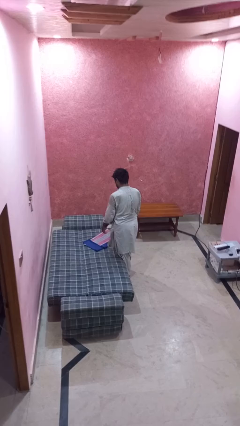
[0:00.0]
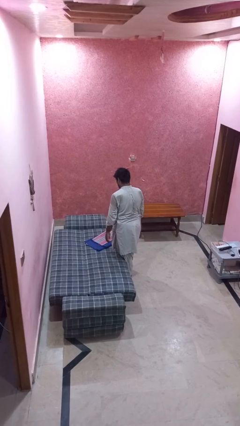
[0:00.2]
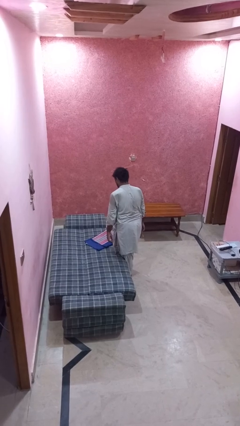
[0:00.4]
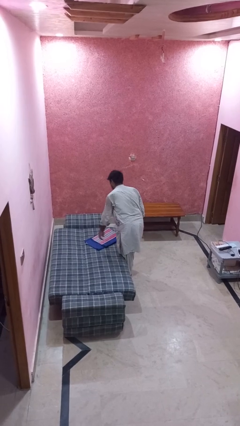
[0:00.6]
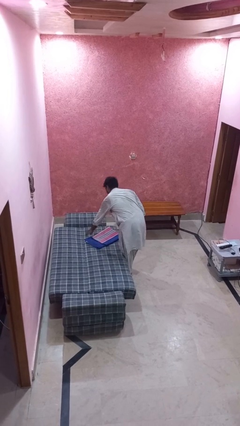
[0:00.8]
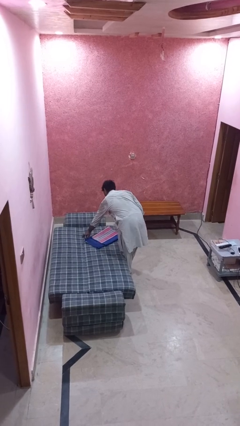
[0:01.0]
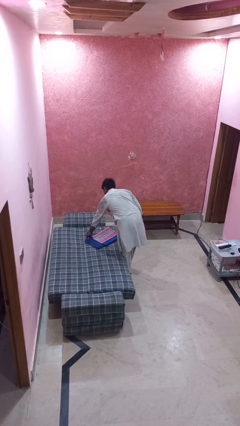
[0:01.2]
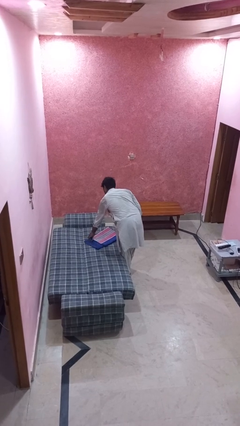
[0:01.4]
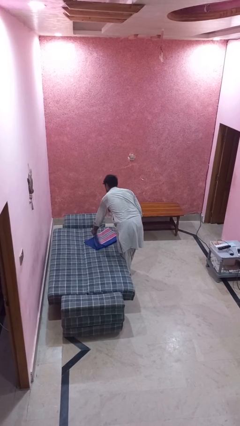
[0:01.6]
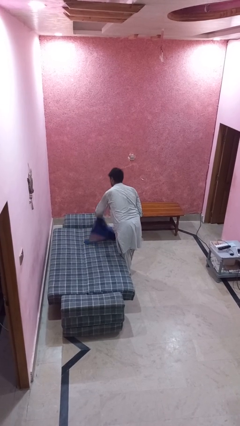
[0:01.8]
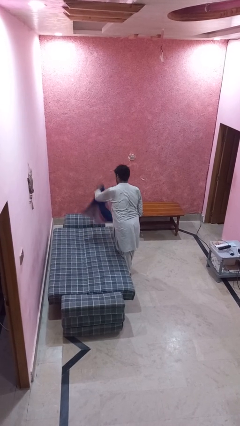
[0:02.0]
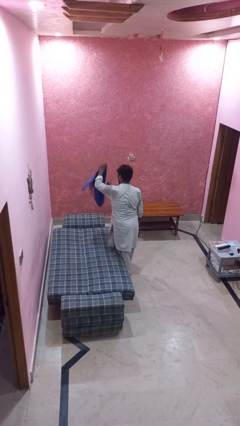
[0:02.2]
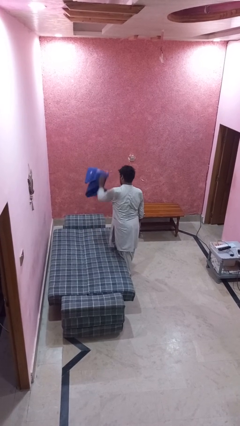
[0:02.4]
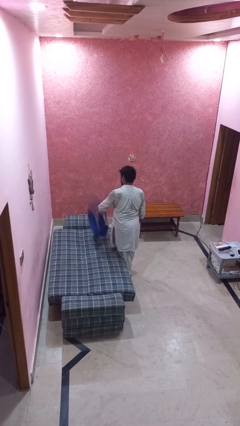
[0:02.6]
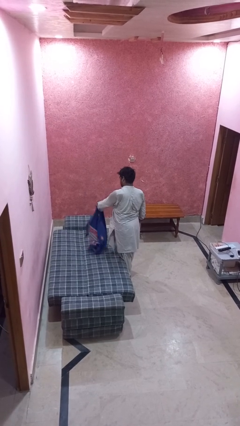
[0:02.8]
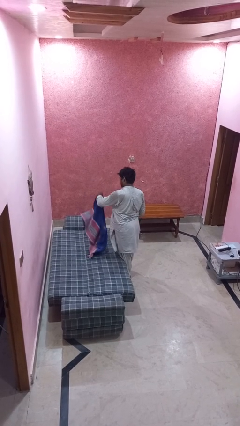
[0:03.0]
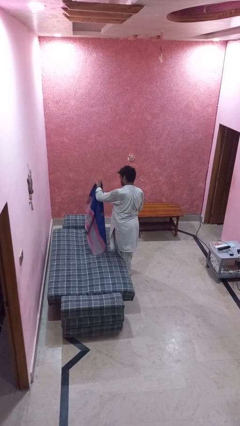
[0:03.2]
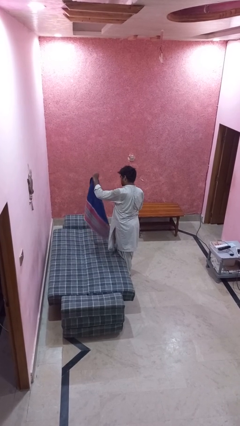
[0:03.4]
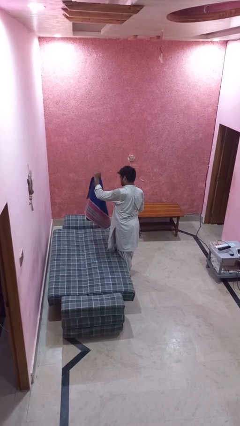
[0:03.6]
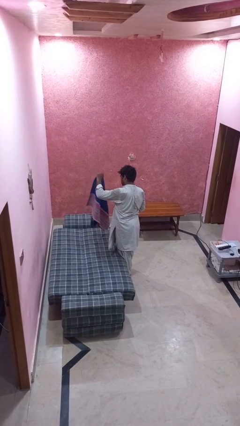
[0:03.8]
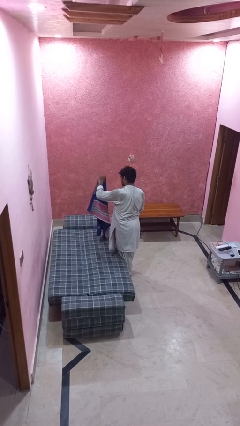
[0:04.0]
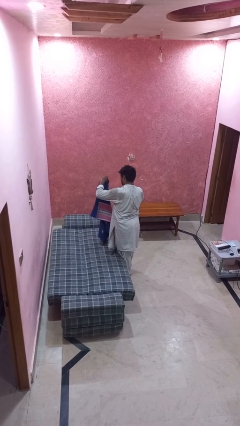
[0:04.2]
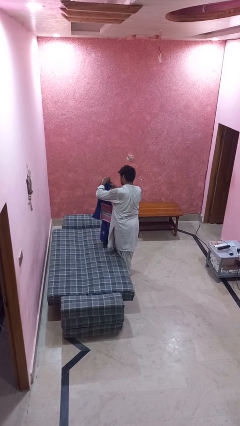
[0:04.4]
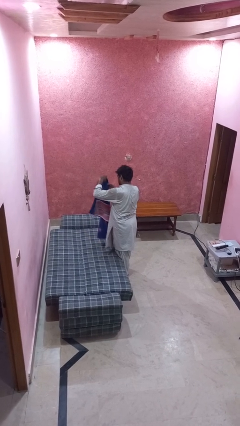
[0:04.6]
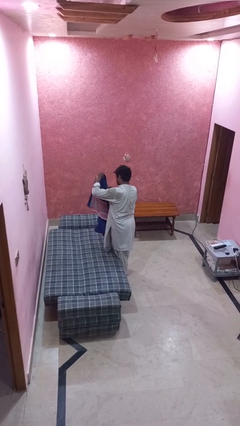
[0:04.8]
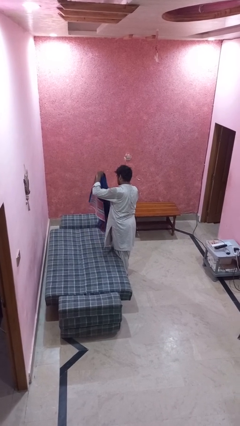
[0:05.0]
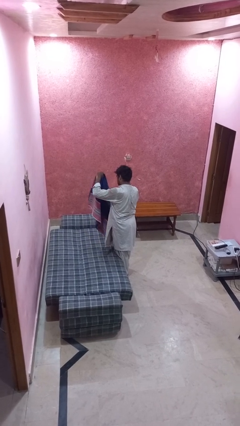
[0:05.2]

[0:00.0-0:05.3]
person unfolds blanket

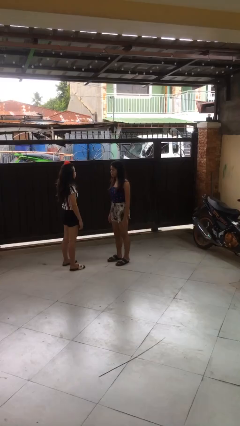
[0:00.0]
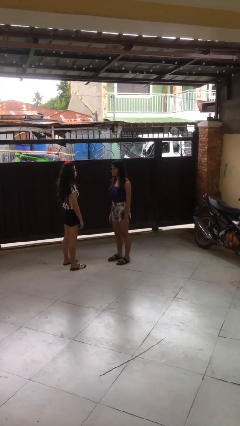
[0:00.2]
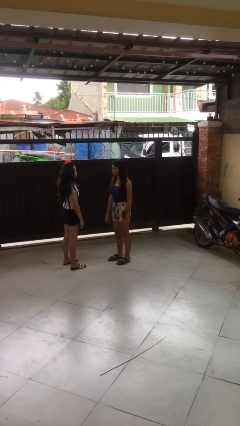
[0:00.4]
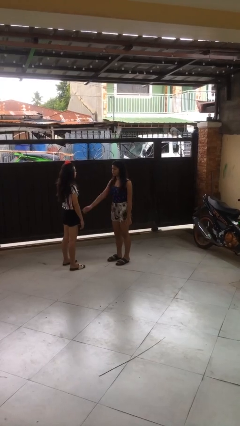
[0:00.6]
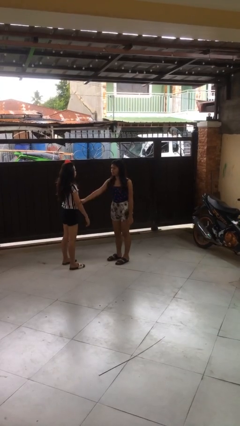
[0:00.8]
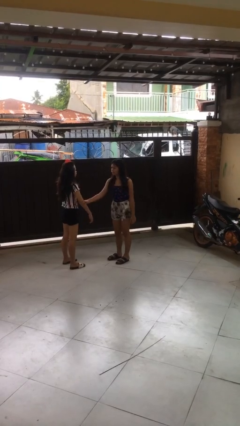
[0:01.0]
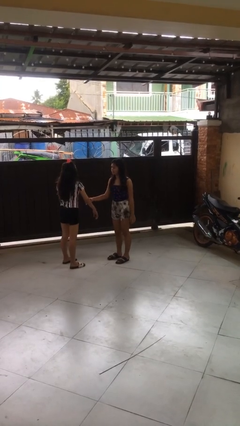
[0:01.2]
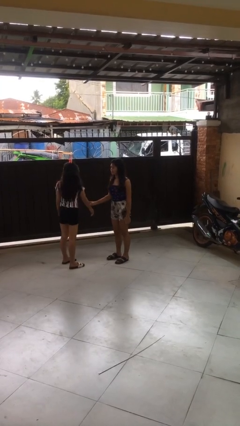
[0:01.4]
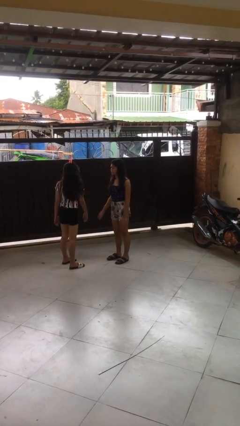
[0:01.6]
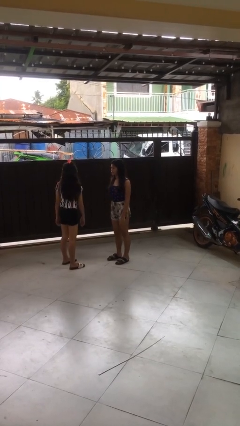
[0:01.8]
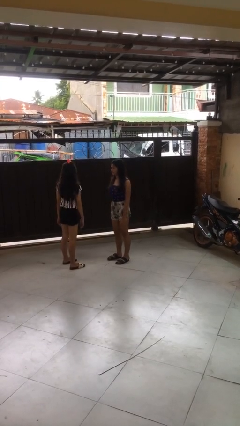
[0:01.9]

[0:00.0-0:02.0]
person grabs person by forearm

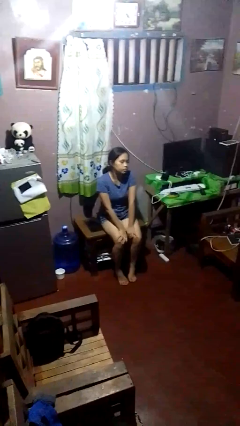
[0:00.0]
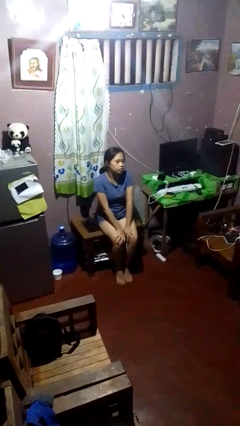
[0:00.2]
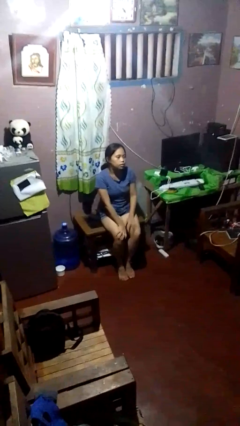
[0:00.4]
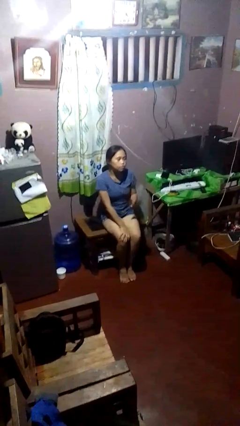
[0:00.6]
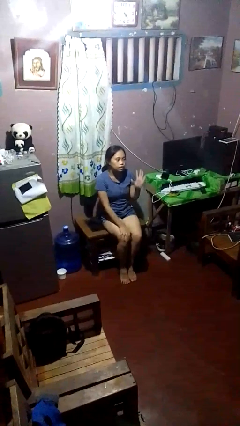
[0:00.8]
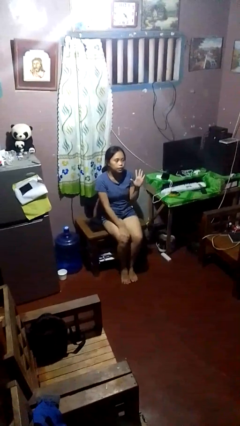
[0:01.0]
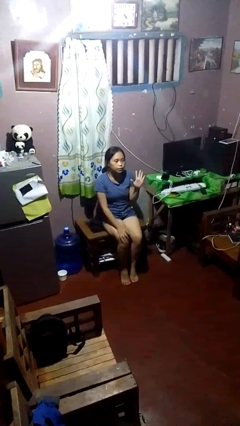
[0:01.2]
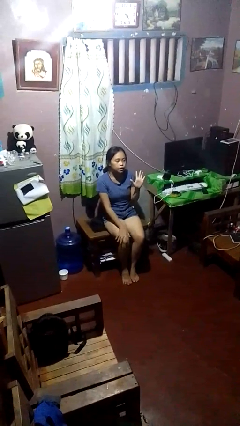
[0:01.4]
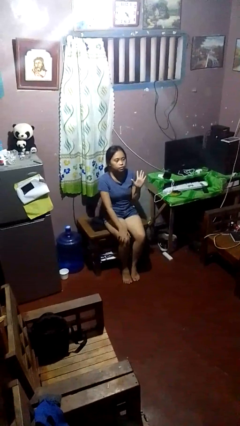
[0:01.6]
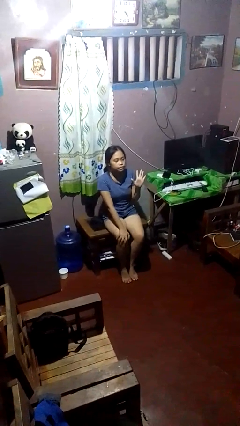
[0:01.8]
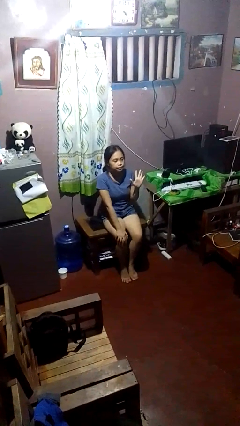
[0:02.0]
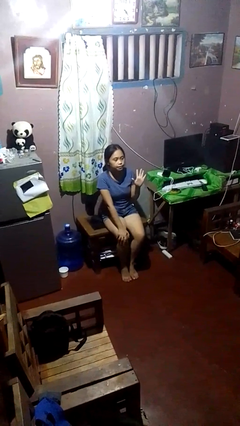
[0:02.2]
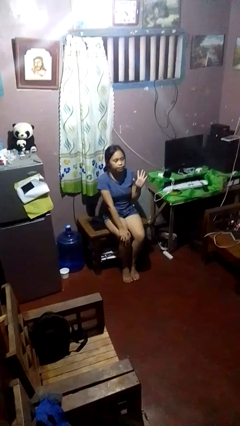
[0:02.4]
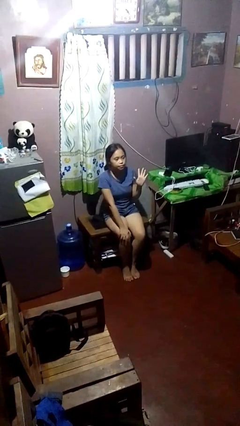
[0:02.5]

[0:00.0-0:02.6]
person gestures number five

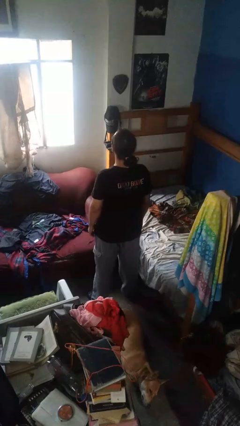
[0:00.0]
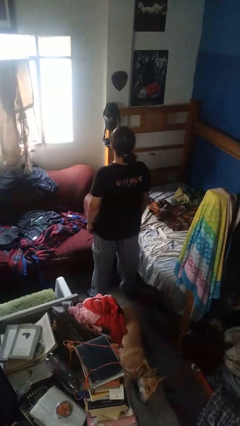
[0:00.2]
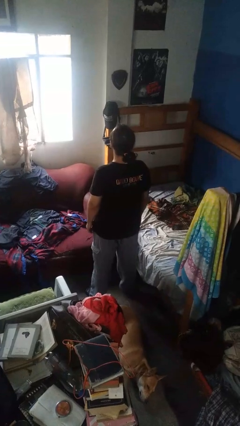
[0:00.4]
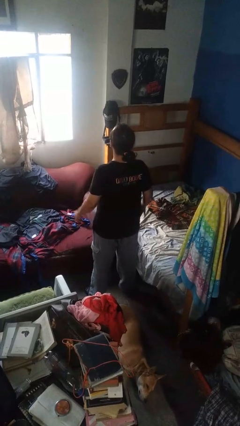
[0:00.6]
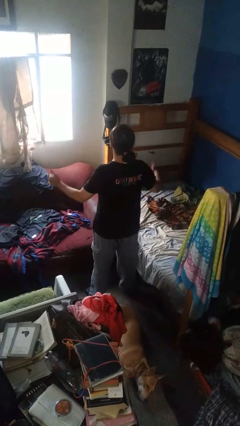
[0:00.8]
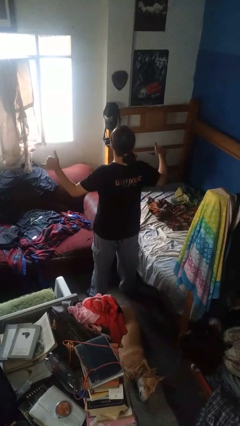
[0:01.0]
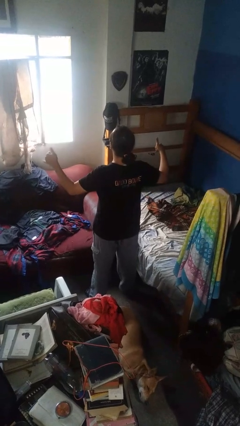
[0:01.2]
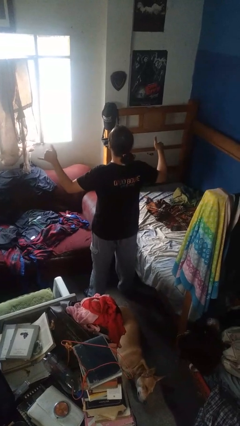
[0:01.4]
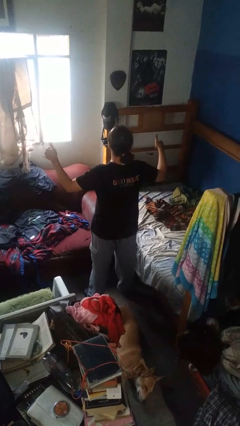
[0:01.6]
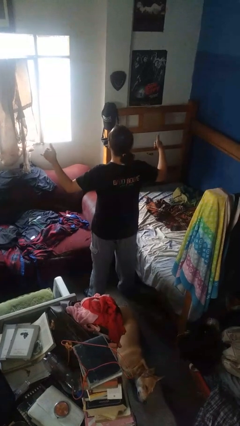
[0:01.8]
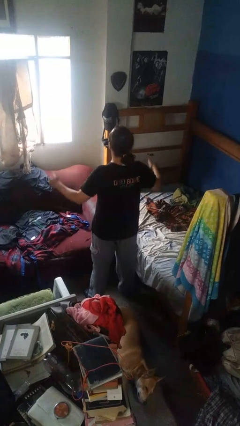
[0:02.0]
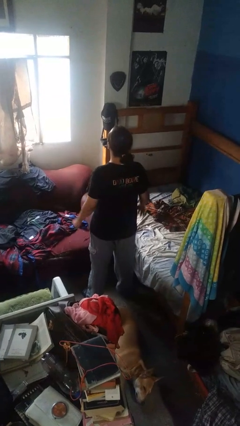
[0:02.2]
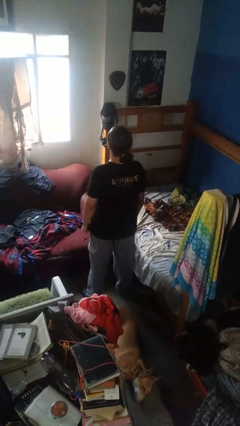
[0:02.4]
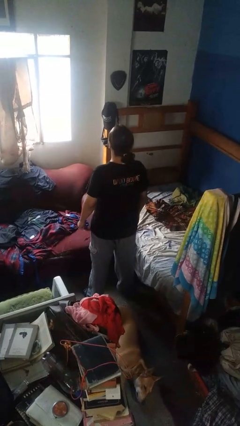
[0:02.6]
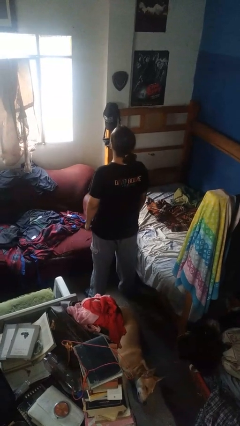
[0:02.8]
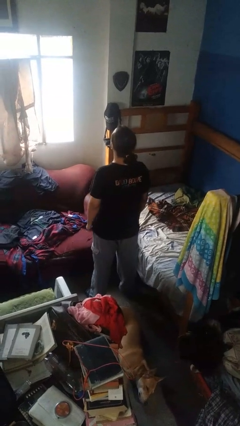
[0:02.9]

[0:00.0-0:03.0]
person gestures hang loose

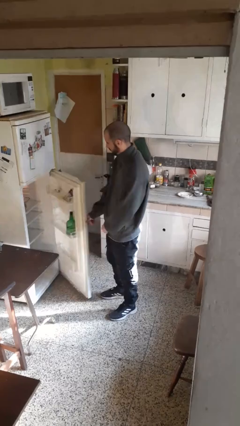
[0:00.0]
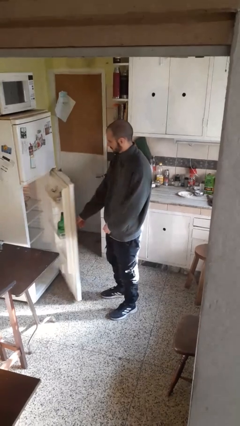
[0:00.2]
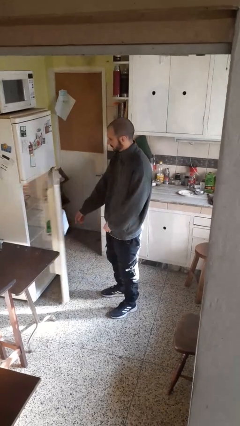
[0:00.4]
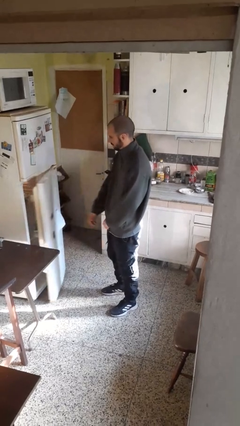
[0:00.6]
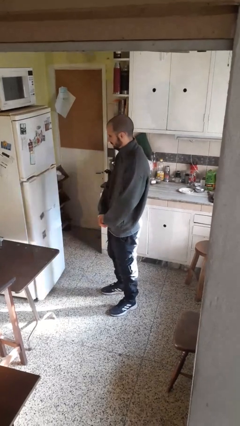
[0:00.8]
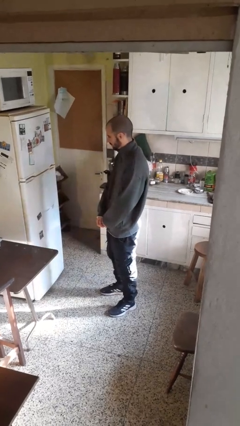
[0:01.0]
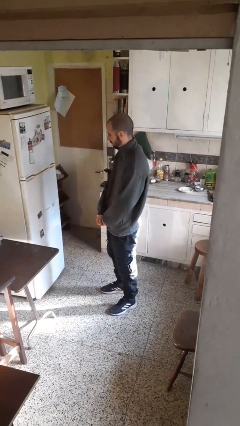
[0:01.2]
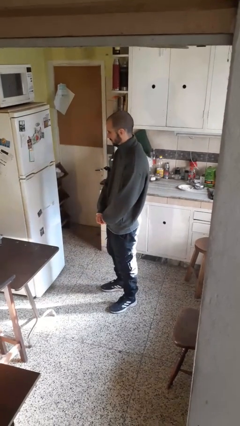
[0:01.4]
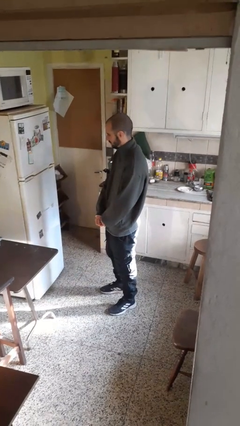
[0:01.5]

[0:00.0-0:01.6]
person closes refrigerator

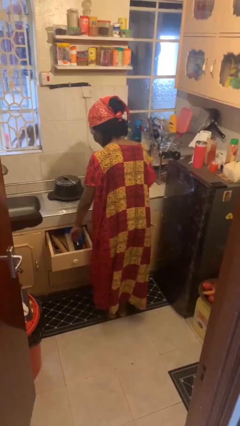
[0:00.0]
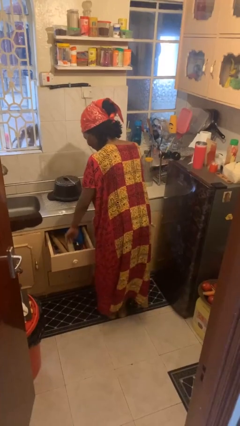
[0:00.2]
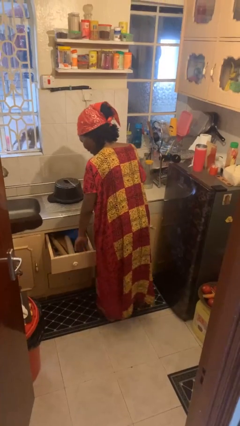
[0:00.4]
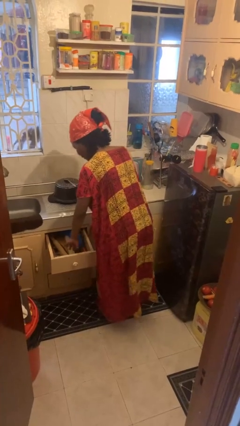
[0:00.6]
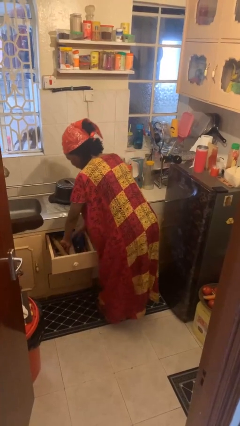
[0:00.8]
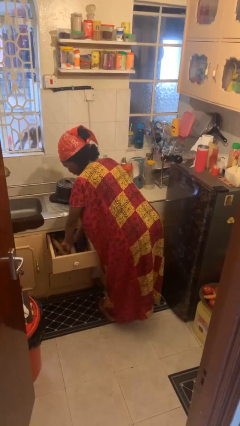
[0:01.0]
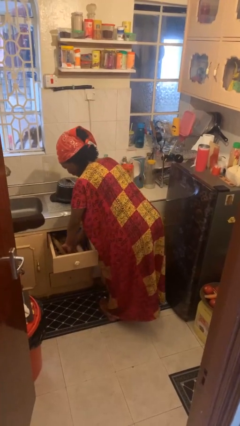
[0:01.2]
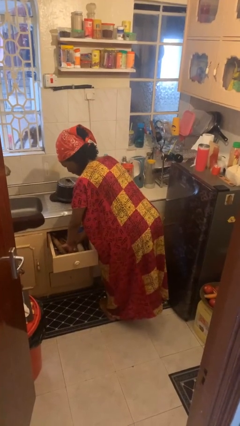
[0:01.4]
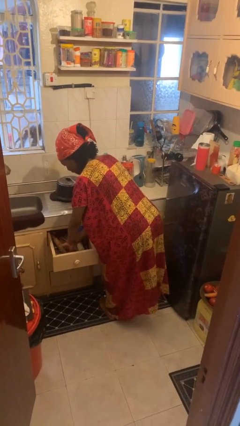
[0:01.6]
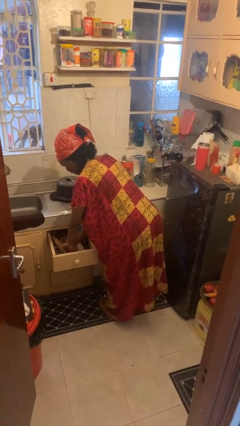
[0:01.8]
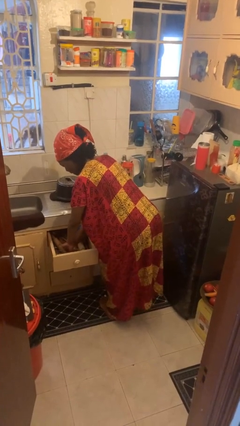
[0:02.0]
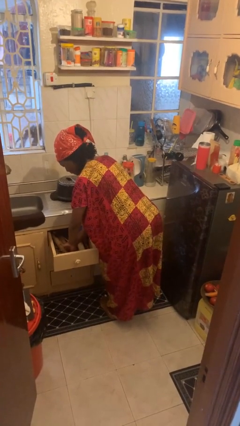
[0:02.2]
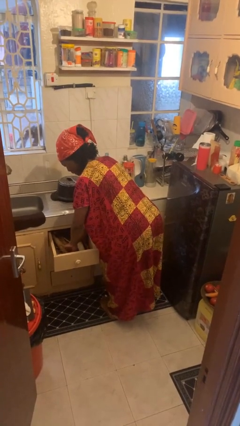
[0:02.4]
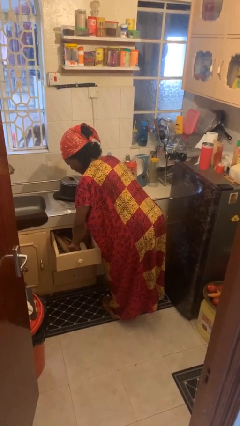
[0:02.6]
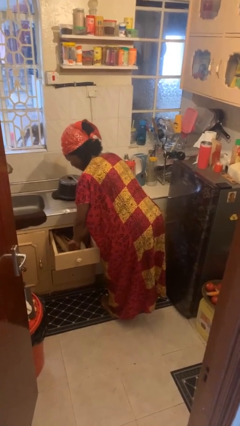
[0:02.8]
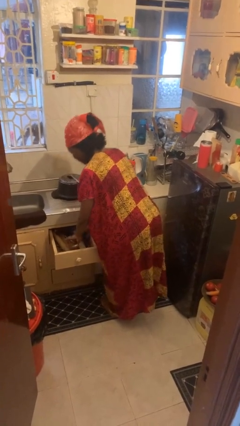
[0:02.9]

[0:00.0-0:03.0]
person searches in kitchen drawer
